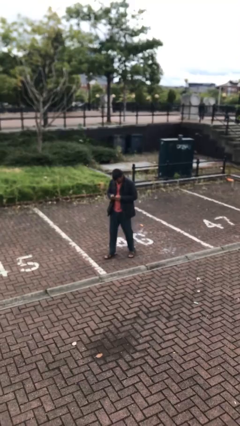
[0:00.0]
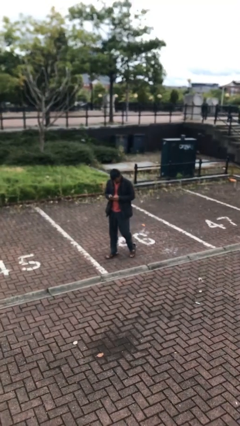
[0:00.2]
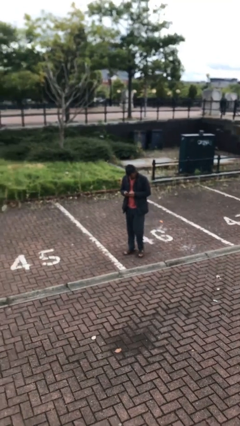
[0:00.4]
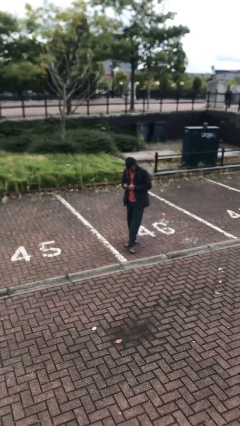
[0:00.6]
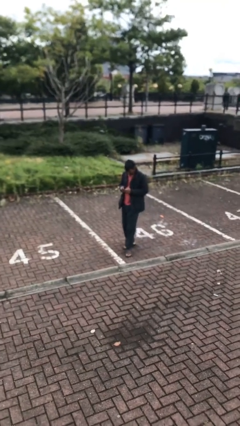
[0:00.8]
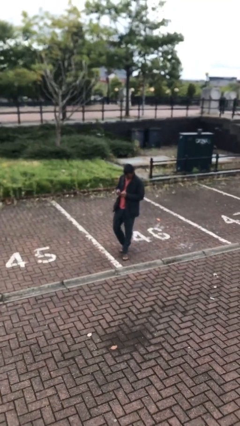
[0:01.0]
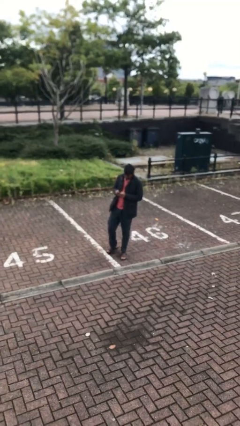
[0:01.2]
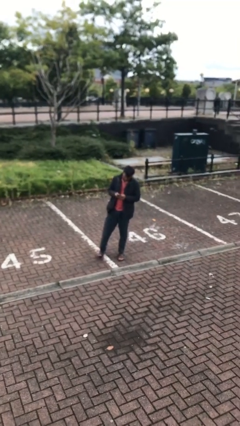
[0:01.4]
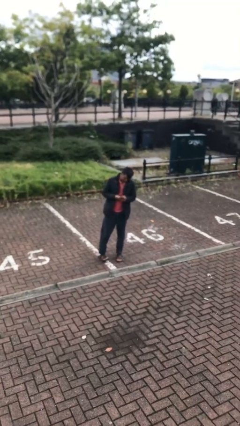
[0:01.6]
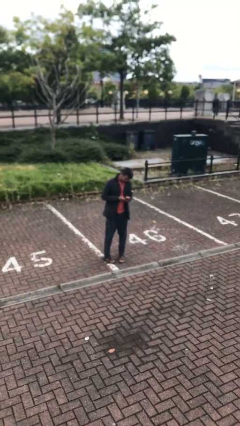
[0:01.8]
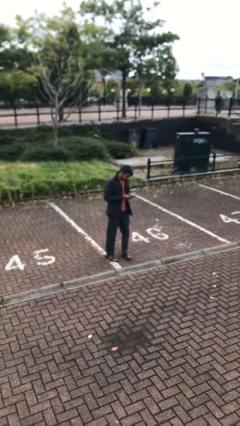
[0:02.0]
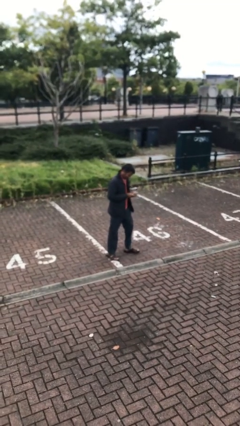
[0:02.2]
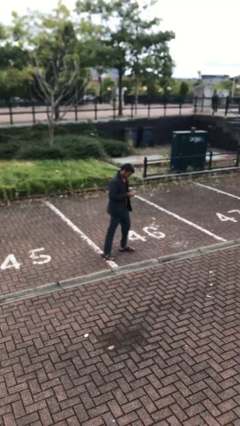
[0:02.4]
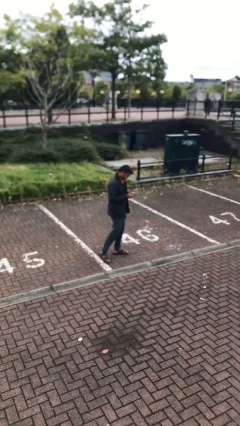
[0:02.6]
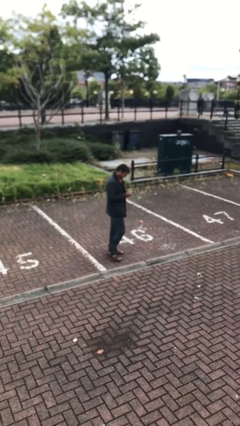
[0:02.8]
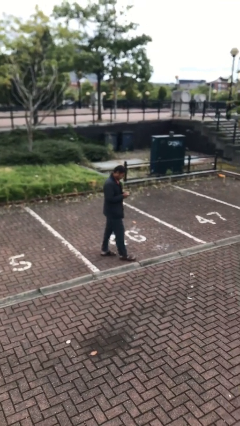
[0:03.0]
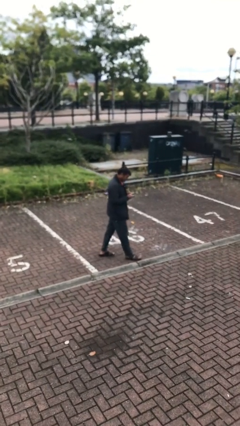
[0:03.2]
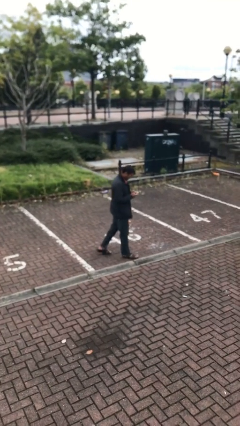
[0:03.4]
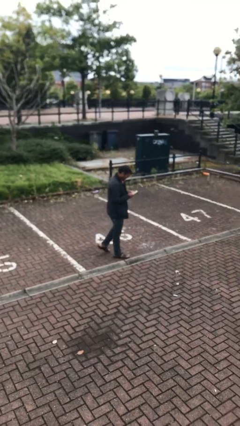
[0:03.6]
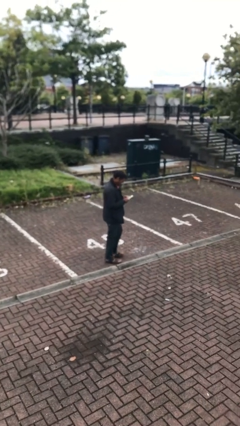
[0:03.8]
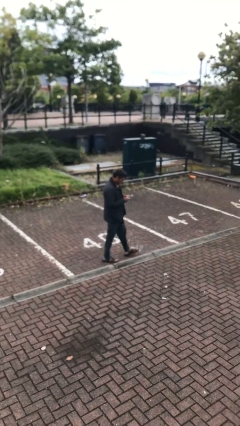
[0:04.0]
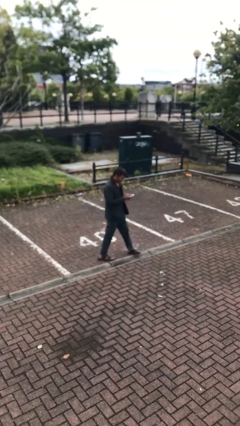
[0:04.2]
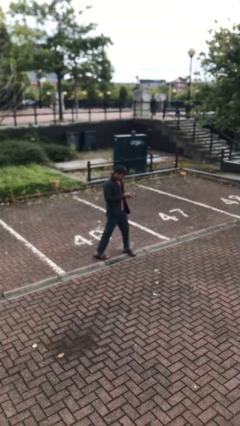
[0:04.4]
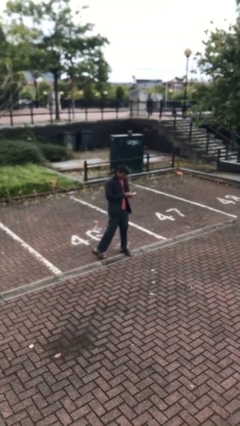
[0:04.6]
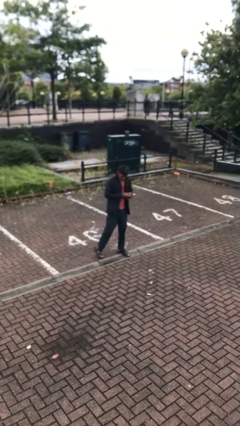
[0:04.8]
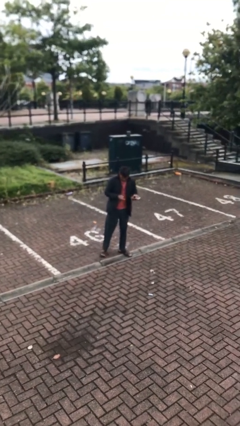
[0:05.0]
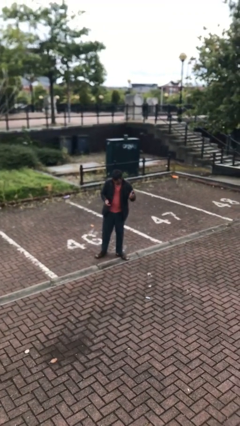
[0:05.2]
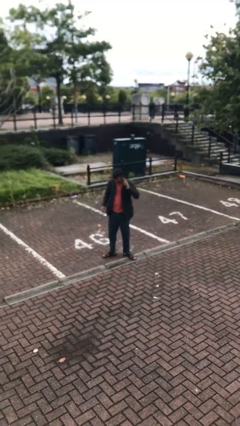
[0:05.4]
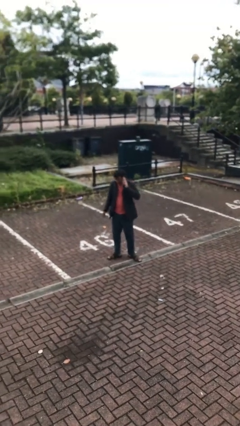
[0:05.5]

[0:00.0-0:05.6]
person texts on phone

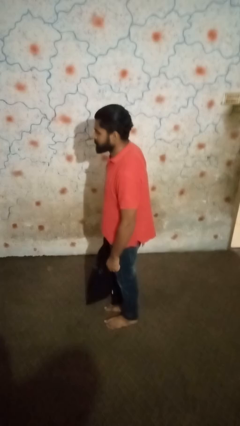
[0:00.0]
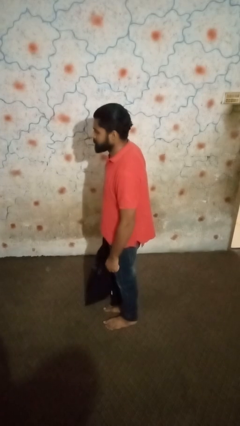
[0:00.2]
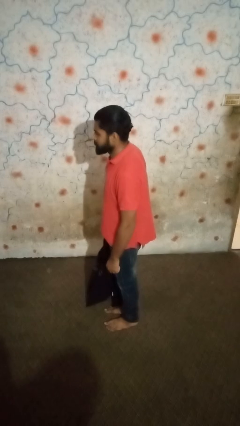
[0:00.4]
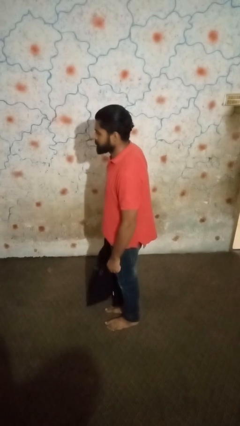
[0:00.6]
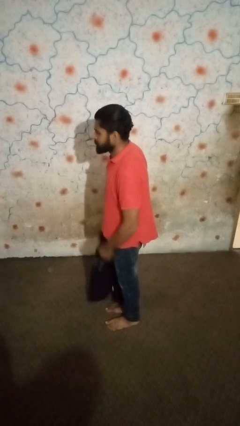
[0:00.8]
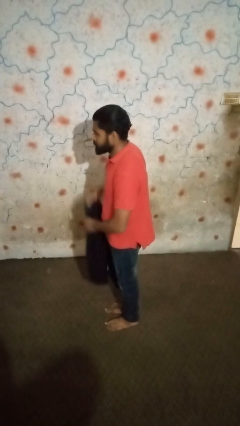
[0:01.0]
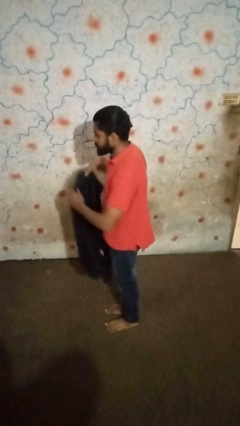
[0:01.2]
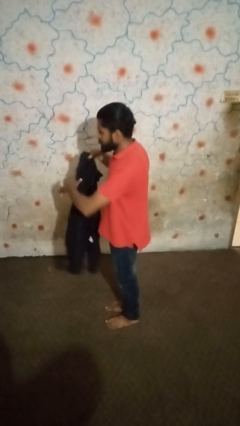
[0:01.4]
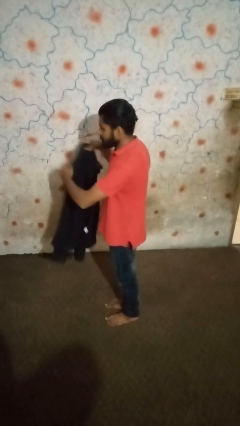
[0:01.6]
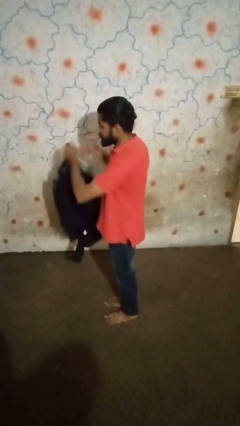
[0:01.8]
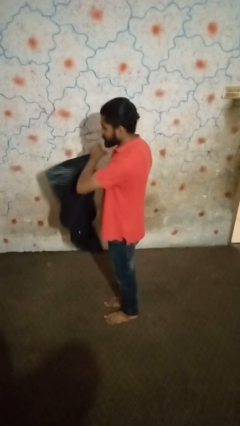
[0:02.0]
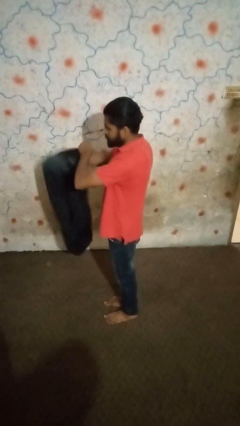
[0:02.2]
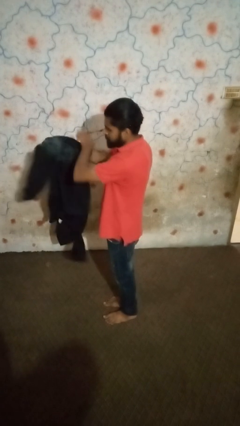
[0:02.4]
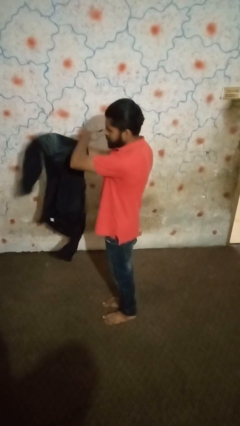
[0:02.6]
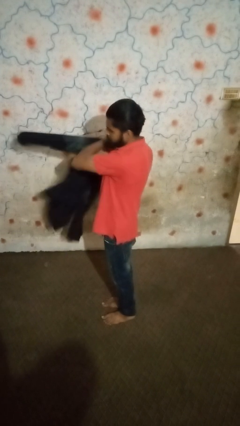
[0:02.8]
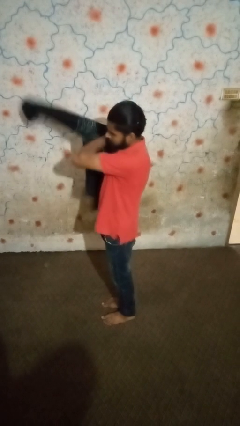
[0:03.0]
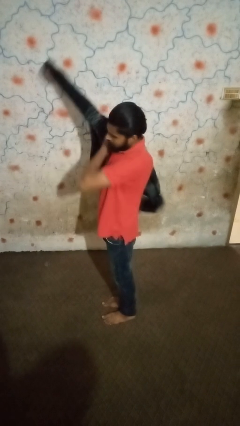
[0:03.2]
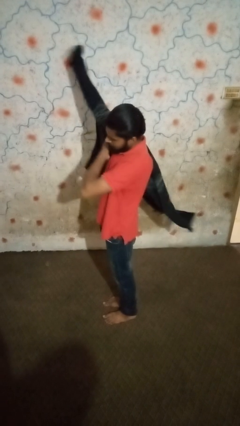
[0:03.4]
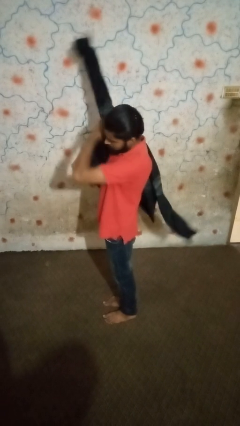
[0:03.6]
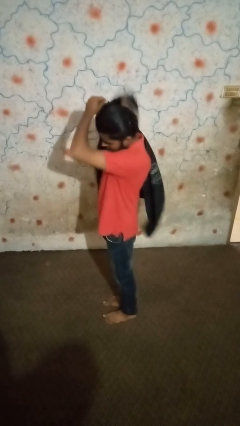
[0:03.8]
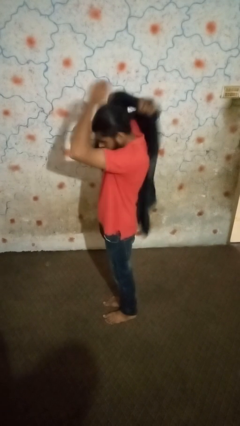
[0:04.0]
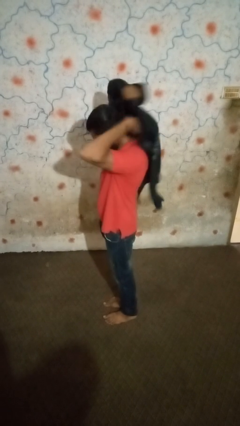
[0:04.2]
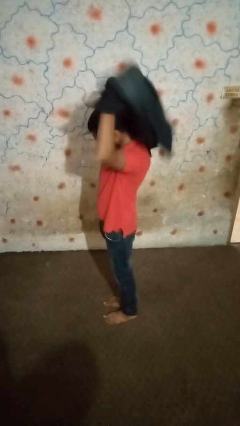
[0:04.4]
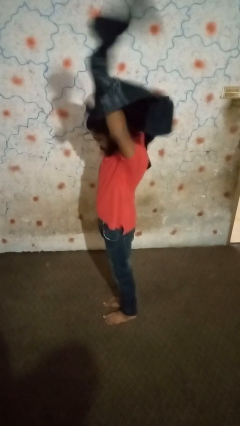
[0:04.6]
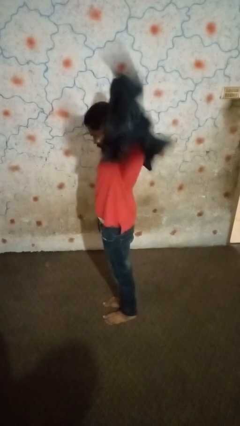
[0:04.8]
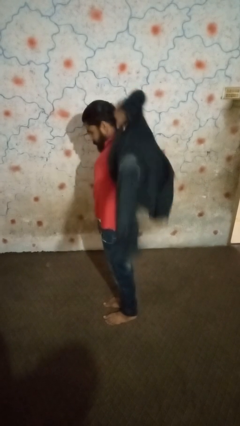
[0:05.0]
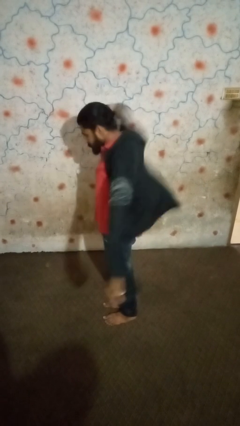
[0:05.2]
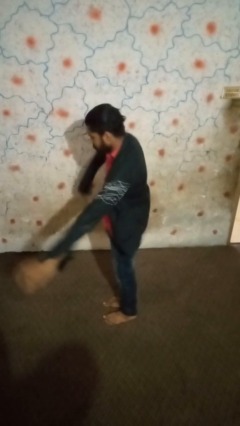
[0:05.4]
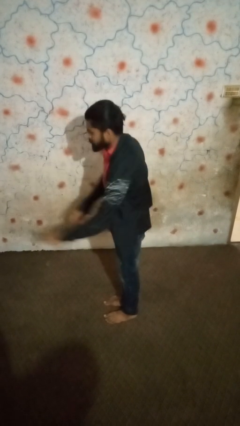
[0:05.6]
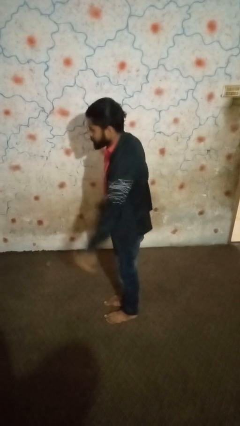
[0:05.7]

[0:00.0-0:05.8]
person puts on shirt

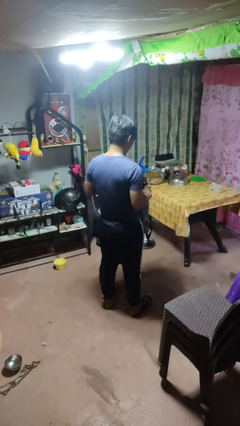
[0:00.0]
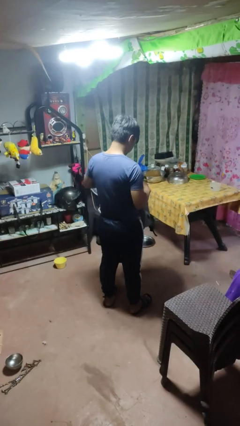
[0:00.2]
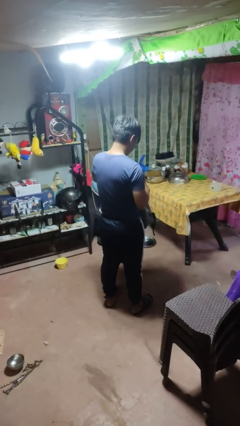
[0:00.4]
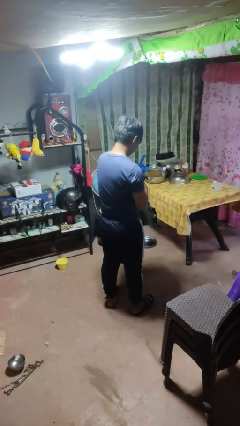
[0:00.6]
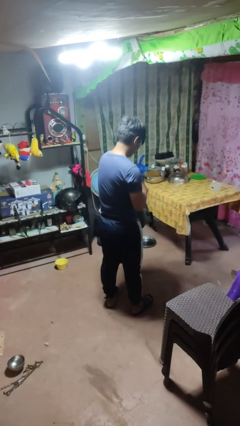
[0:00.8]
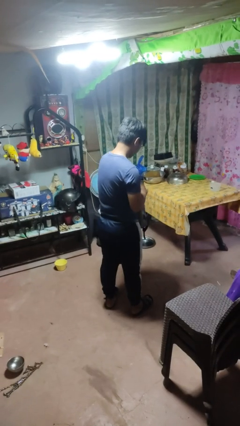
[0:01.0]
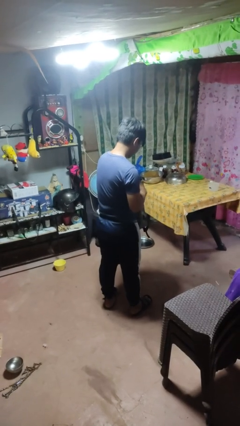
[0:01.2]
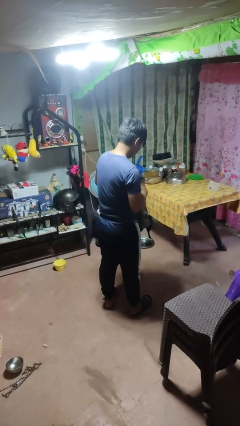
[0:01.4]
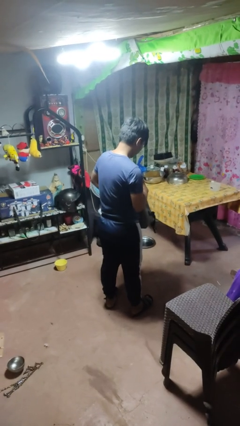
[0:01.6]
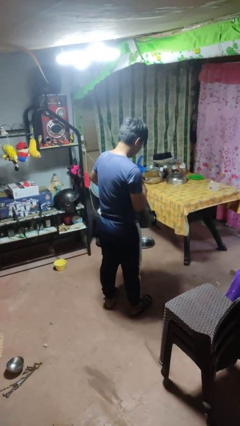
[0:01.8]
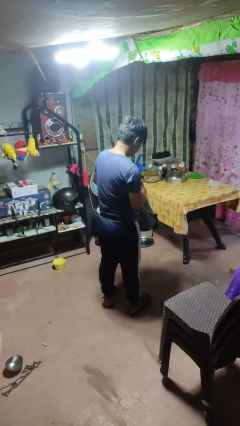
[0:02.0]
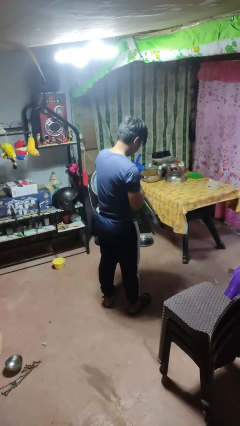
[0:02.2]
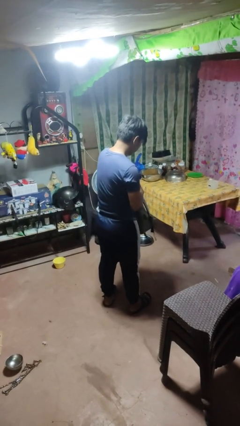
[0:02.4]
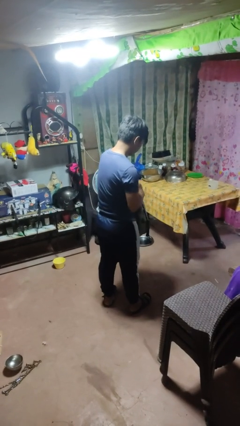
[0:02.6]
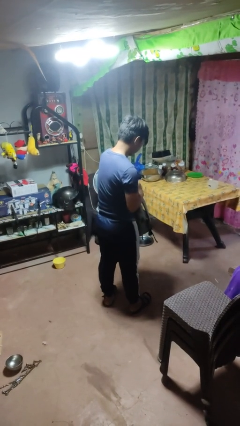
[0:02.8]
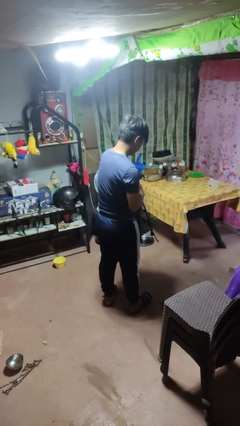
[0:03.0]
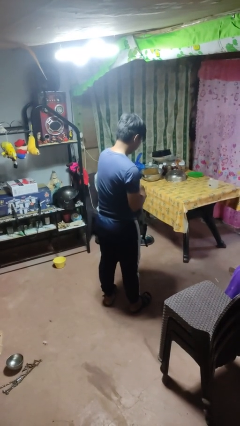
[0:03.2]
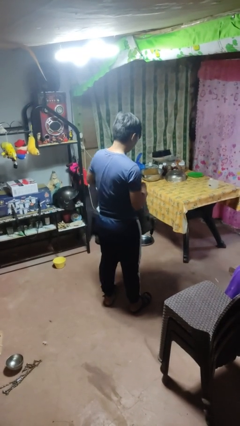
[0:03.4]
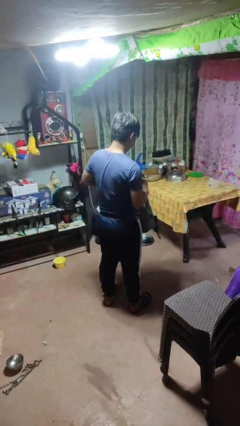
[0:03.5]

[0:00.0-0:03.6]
person searches in bag

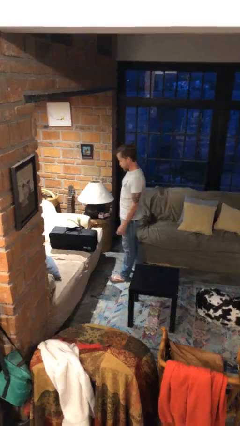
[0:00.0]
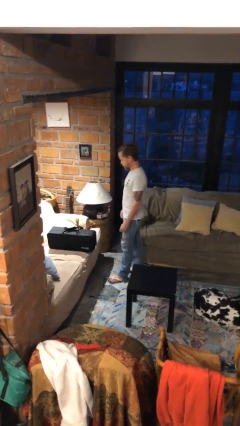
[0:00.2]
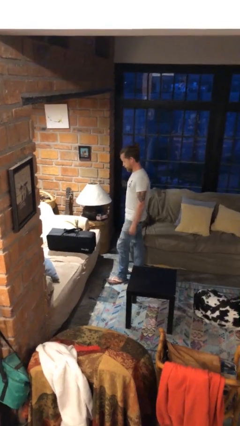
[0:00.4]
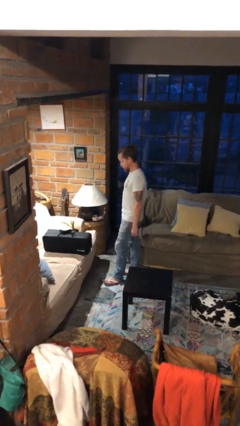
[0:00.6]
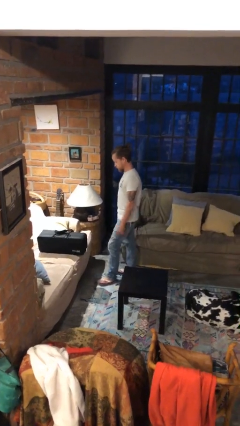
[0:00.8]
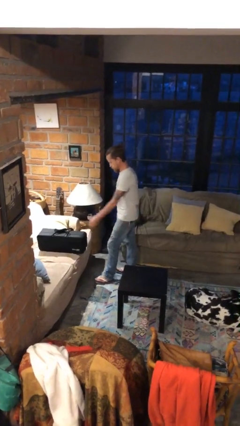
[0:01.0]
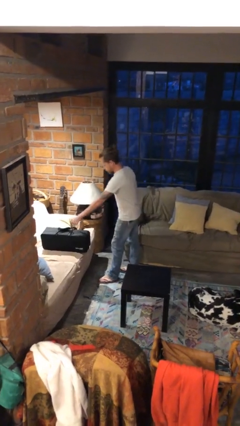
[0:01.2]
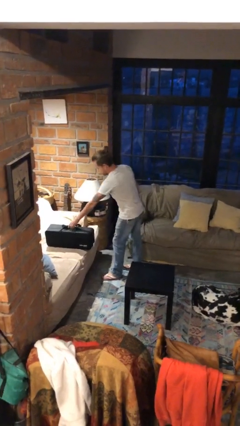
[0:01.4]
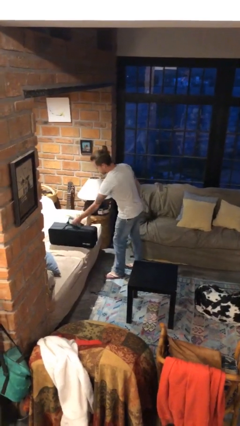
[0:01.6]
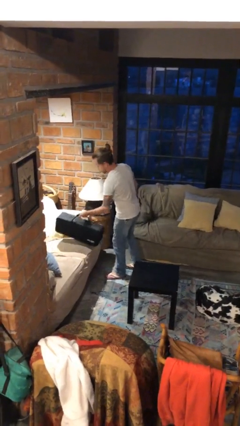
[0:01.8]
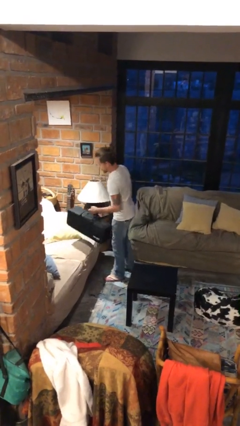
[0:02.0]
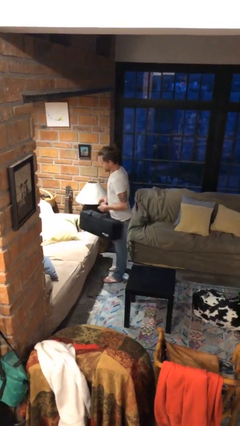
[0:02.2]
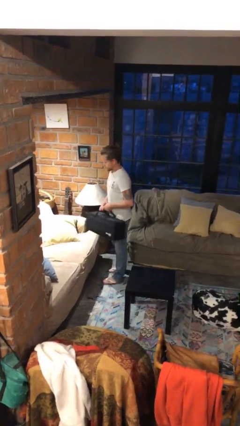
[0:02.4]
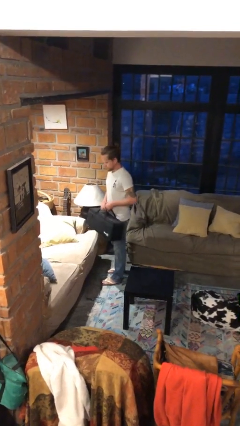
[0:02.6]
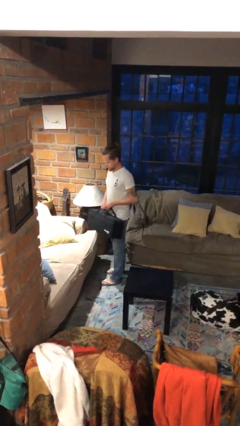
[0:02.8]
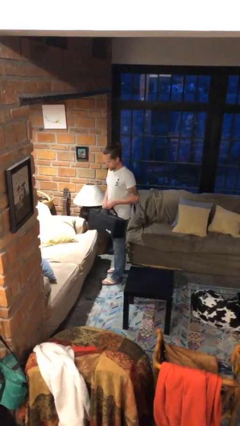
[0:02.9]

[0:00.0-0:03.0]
person picks up object from couch
